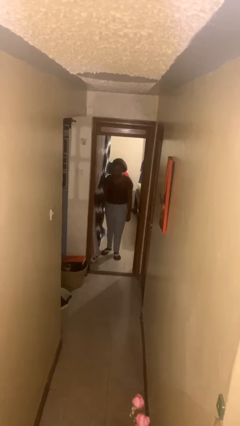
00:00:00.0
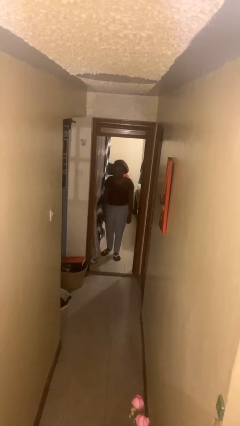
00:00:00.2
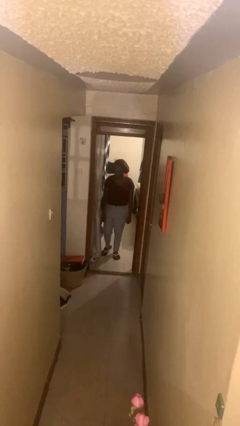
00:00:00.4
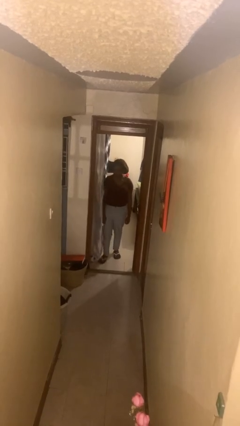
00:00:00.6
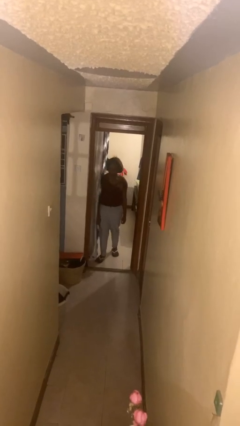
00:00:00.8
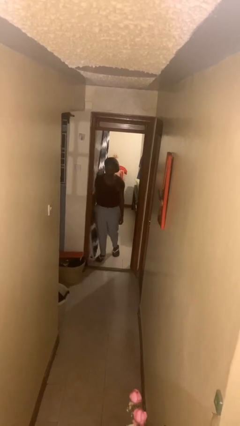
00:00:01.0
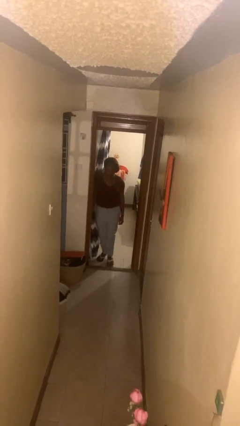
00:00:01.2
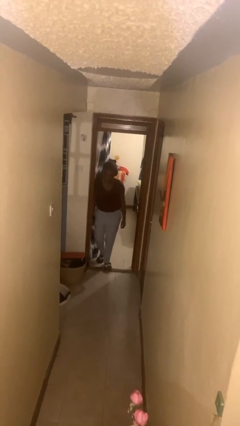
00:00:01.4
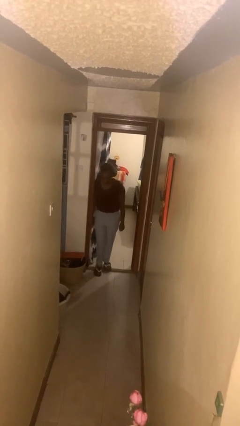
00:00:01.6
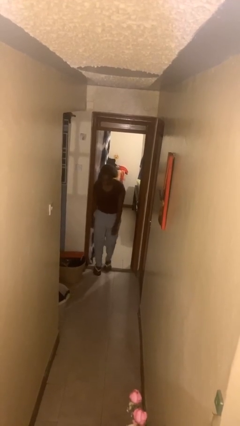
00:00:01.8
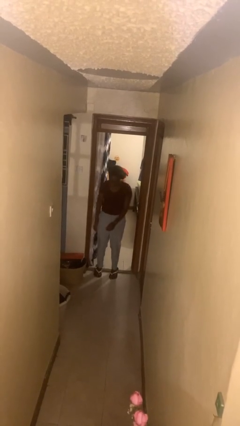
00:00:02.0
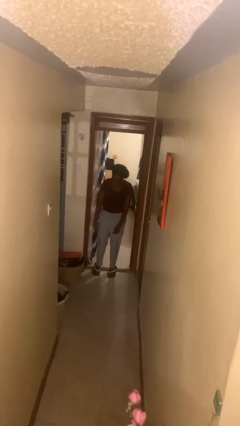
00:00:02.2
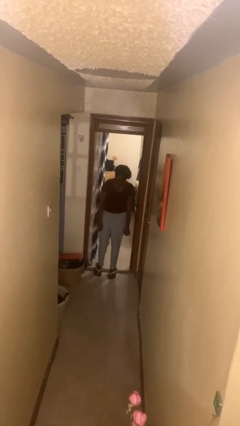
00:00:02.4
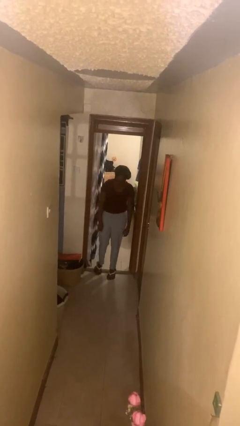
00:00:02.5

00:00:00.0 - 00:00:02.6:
person bumps into wall

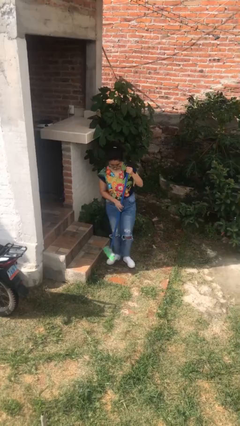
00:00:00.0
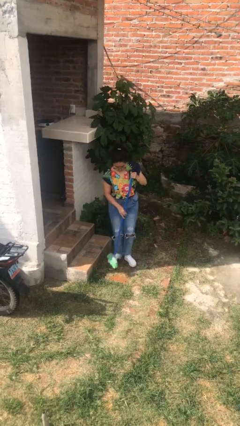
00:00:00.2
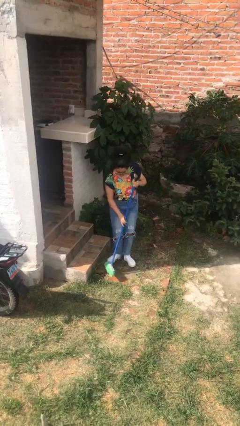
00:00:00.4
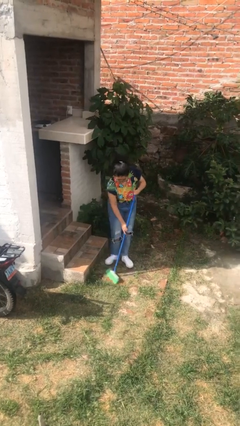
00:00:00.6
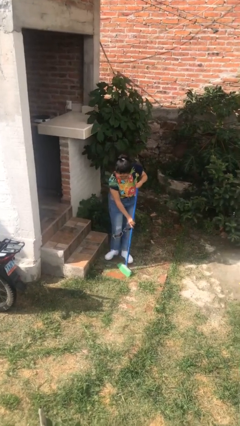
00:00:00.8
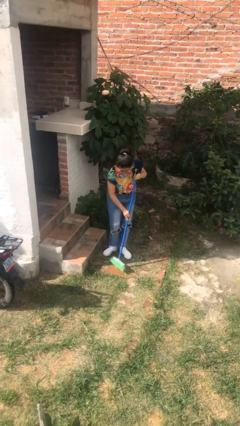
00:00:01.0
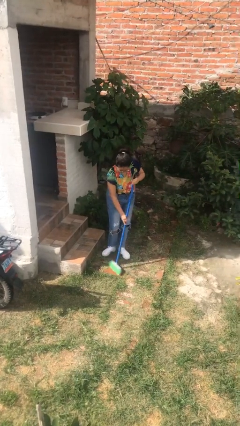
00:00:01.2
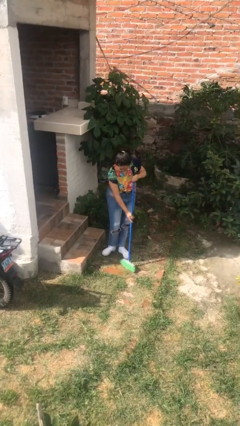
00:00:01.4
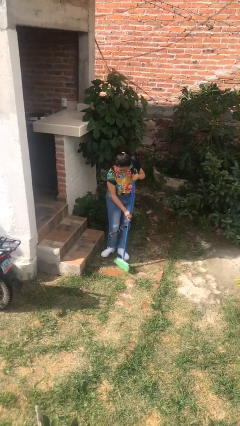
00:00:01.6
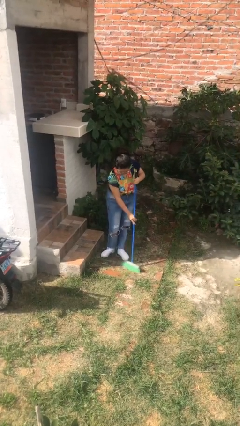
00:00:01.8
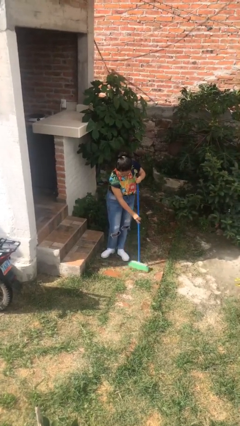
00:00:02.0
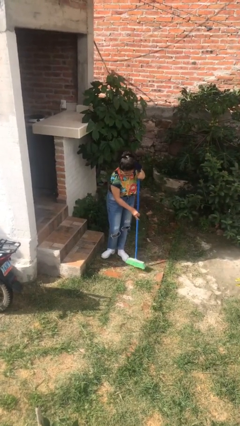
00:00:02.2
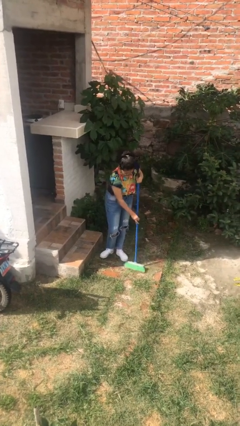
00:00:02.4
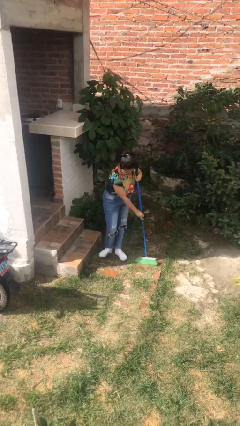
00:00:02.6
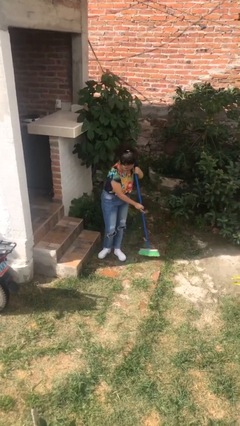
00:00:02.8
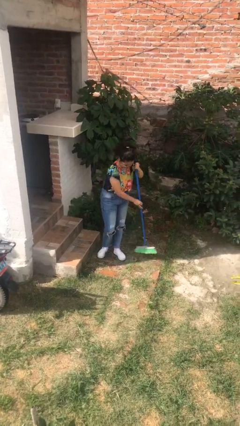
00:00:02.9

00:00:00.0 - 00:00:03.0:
person sweeps floor

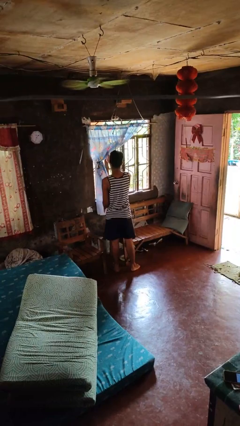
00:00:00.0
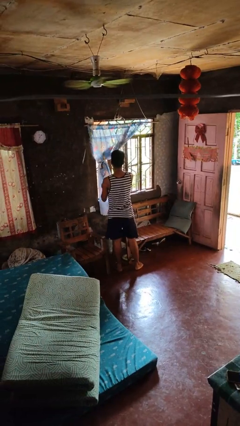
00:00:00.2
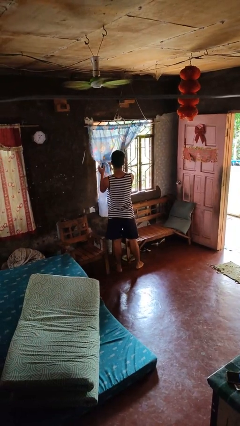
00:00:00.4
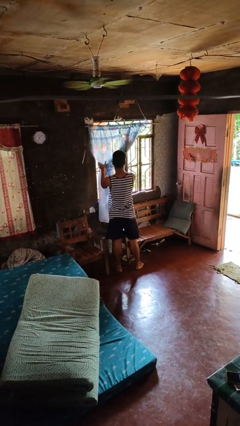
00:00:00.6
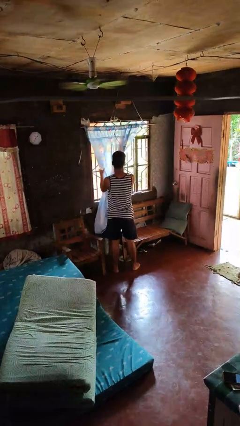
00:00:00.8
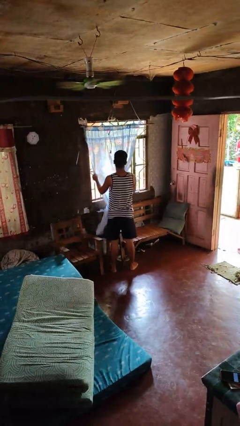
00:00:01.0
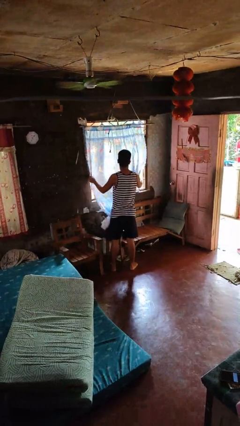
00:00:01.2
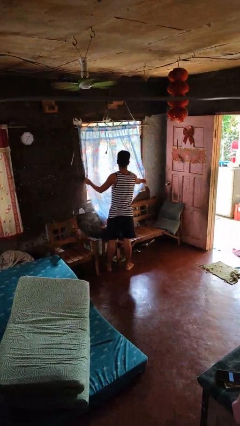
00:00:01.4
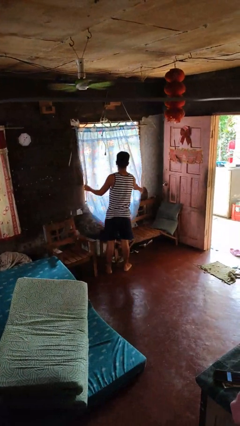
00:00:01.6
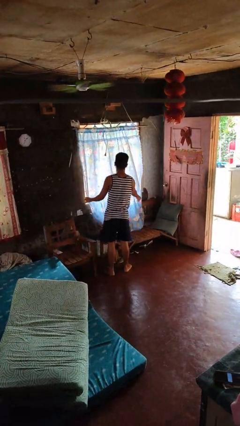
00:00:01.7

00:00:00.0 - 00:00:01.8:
person closes curtains

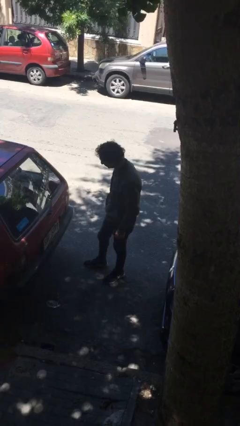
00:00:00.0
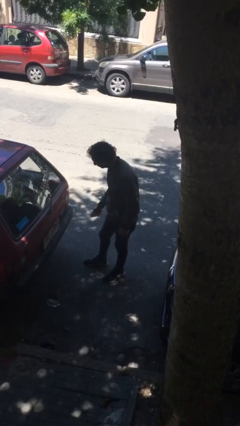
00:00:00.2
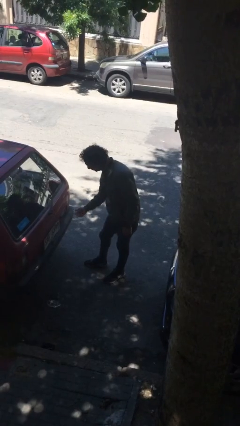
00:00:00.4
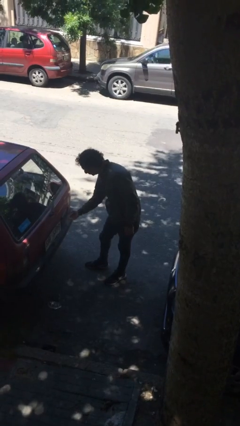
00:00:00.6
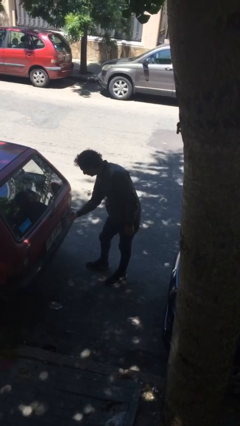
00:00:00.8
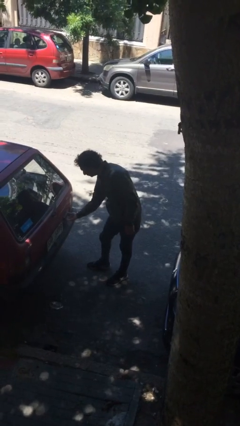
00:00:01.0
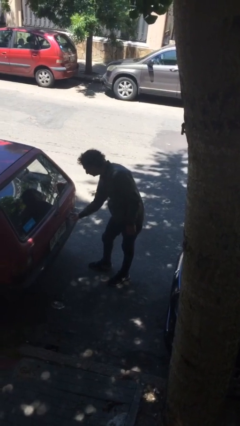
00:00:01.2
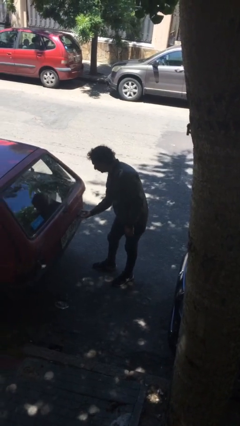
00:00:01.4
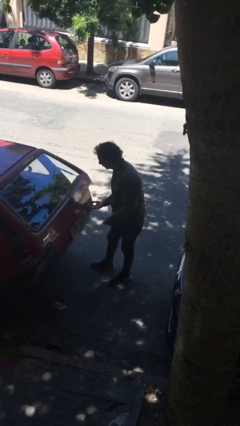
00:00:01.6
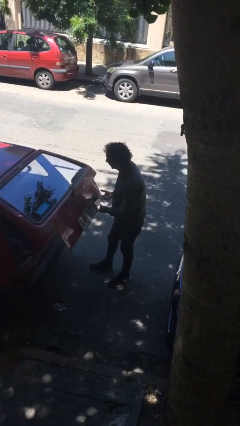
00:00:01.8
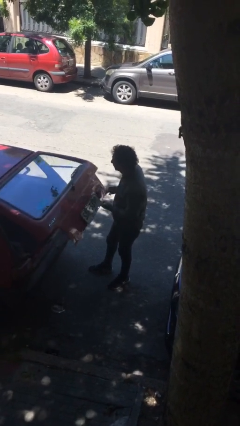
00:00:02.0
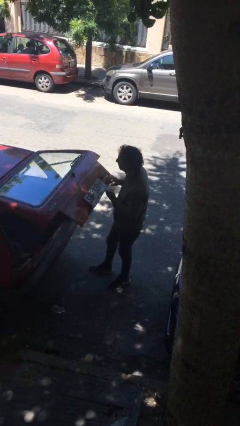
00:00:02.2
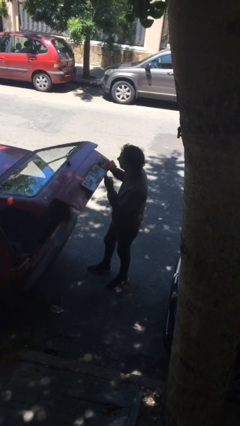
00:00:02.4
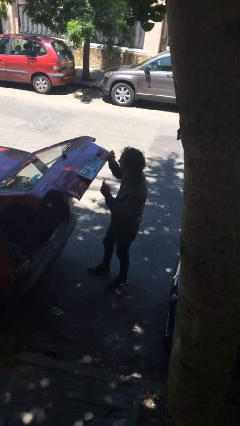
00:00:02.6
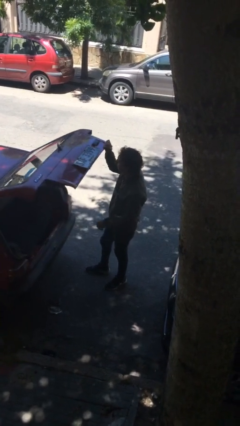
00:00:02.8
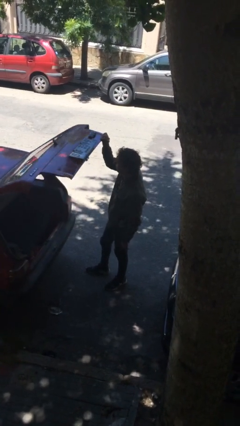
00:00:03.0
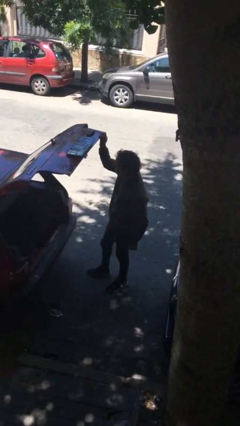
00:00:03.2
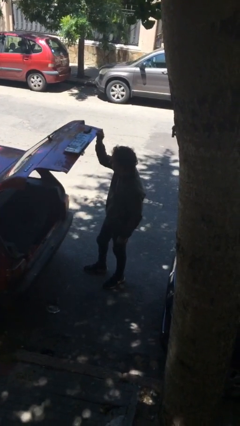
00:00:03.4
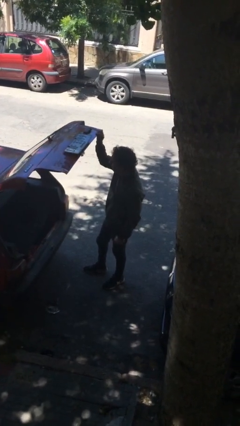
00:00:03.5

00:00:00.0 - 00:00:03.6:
person opens car trunk

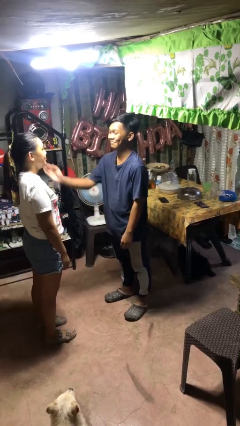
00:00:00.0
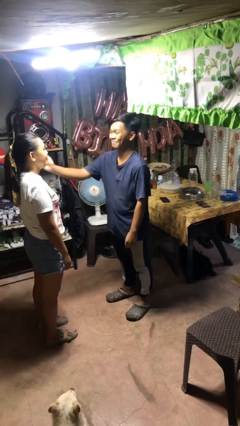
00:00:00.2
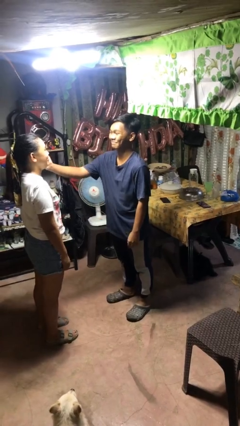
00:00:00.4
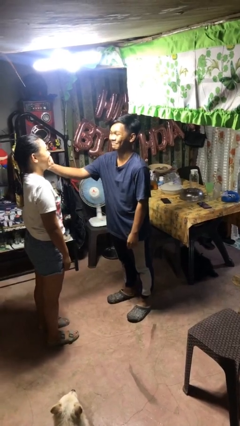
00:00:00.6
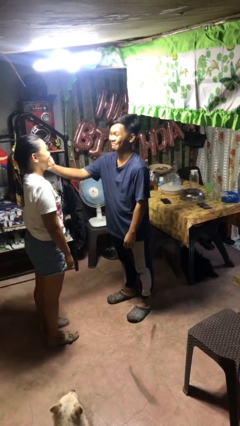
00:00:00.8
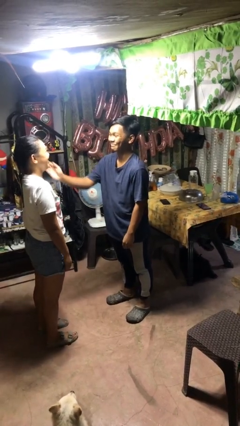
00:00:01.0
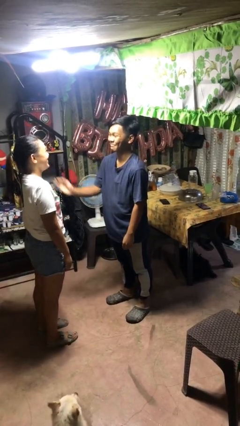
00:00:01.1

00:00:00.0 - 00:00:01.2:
person touches face of person

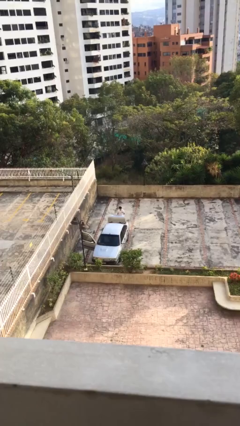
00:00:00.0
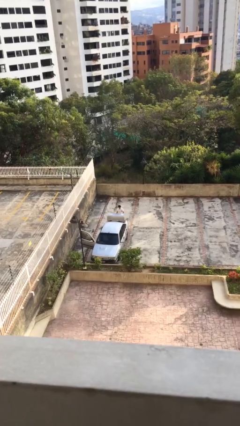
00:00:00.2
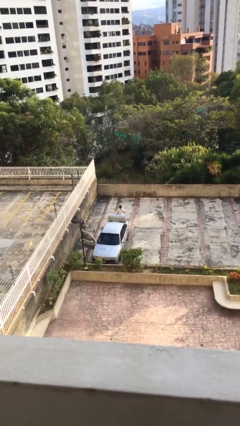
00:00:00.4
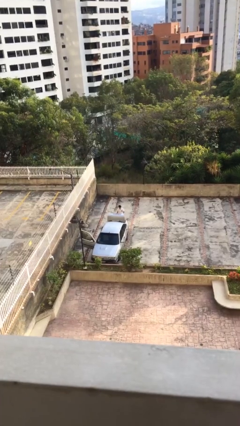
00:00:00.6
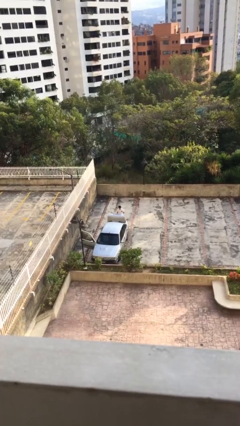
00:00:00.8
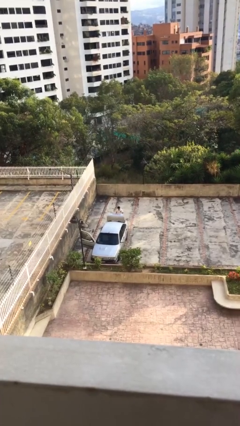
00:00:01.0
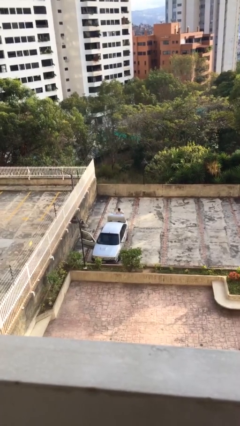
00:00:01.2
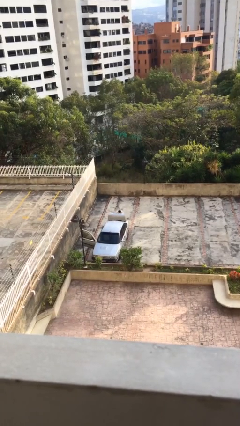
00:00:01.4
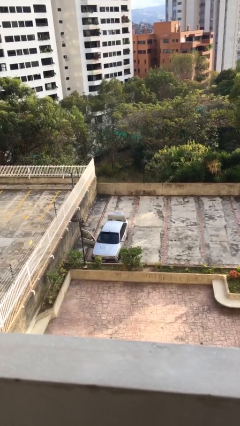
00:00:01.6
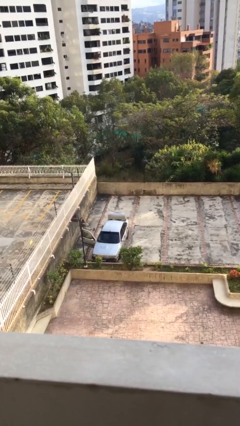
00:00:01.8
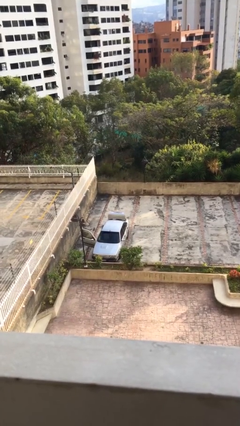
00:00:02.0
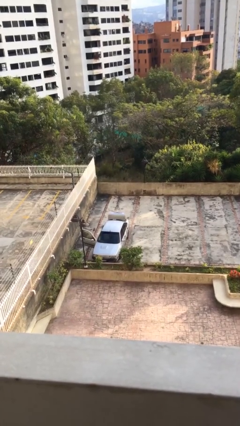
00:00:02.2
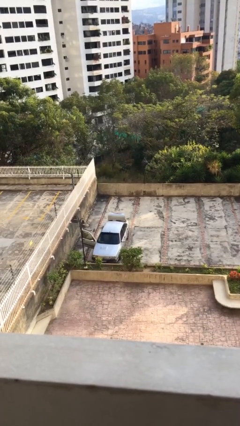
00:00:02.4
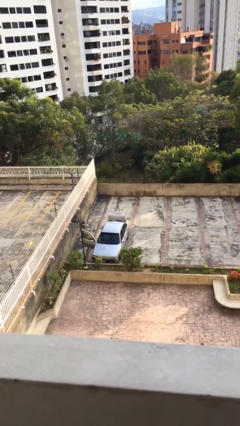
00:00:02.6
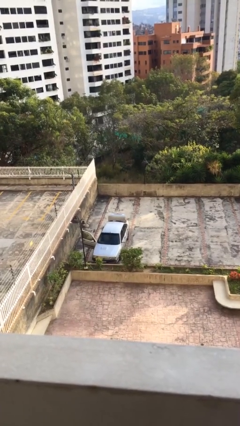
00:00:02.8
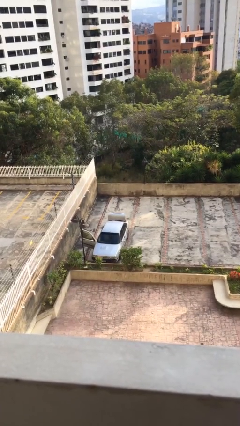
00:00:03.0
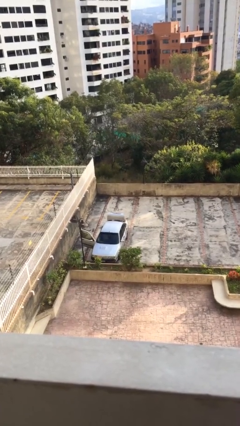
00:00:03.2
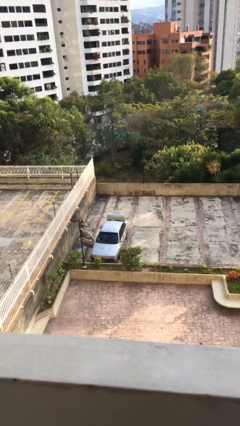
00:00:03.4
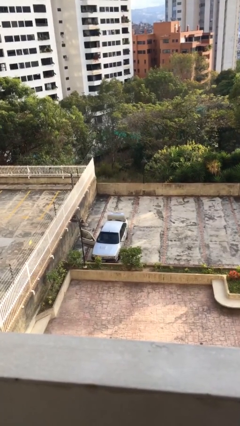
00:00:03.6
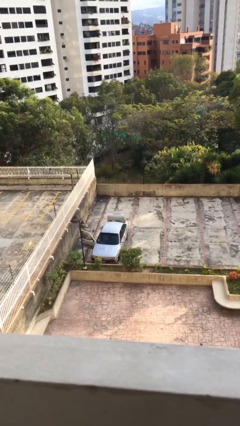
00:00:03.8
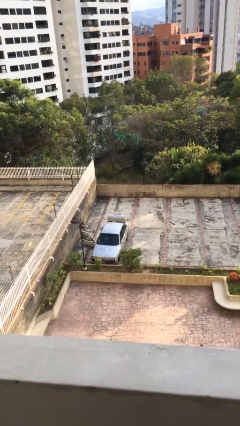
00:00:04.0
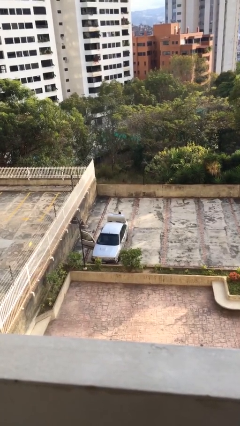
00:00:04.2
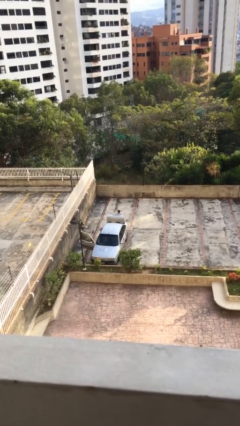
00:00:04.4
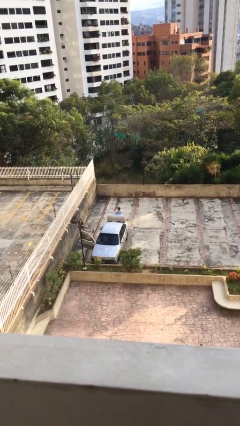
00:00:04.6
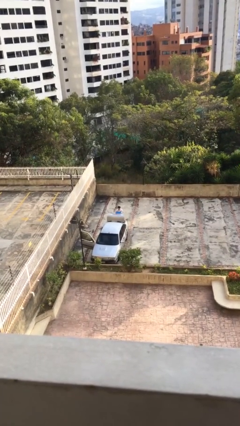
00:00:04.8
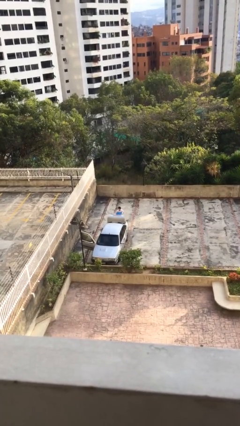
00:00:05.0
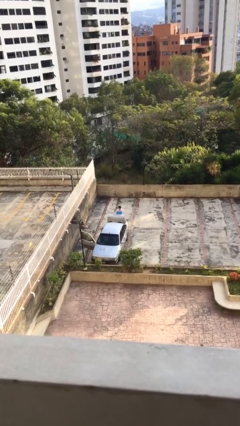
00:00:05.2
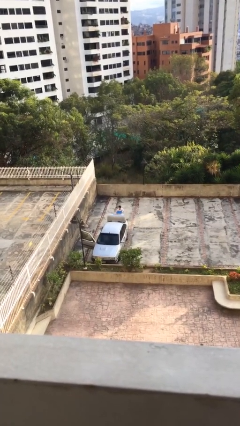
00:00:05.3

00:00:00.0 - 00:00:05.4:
person unloads car
